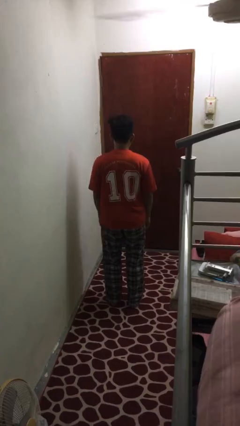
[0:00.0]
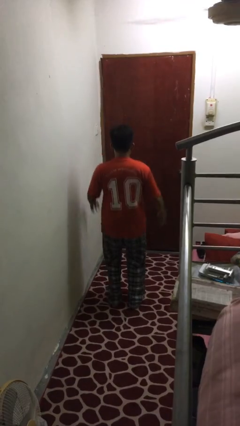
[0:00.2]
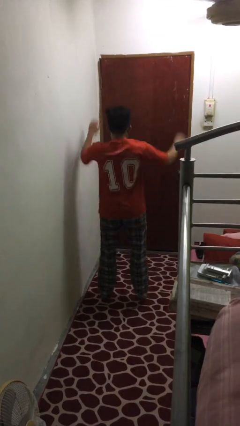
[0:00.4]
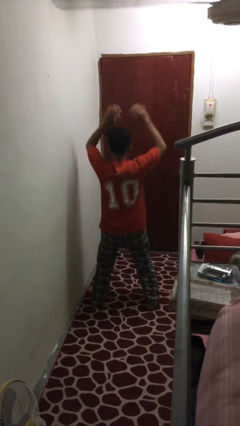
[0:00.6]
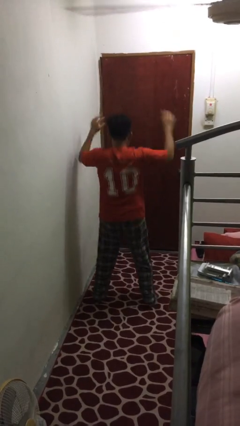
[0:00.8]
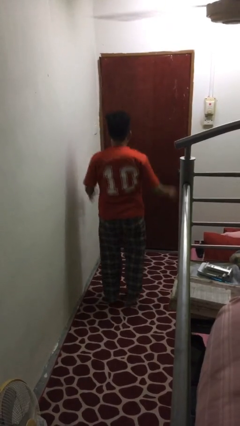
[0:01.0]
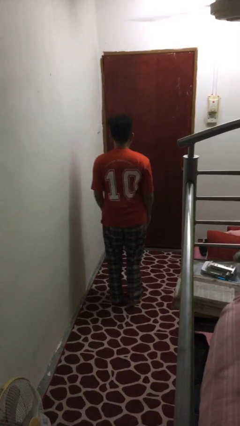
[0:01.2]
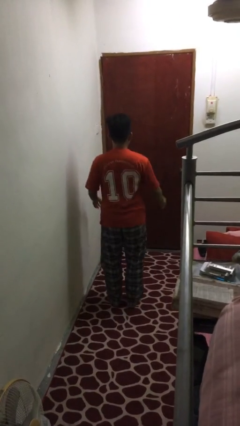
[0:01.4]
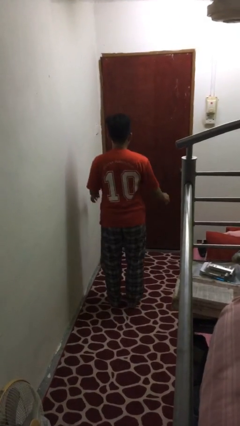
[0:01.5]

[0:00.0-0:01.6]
person exercises with jumping jacks

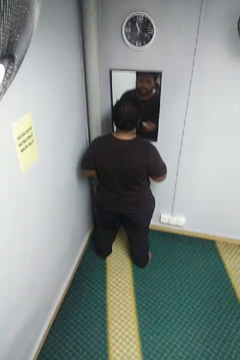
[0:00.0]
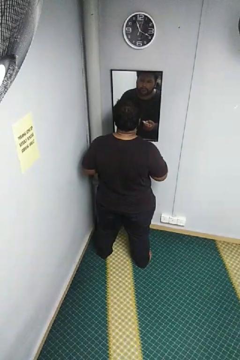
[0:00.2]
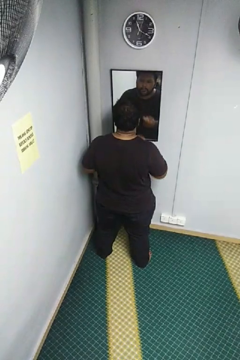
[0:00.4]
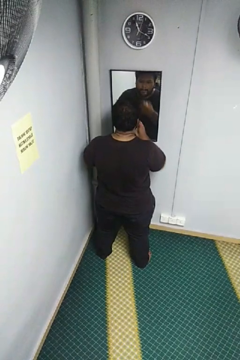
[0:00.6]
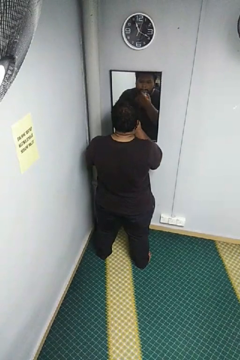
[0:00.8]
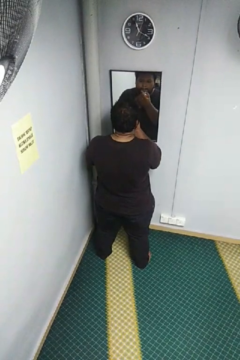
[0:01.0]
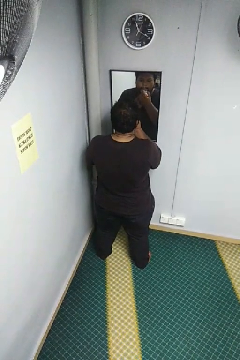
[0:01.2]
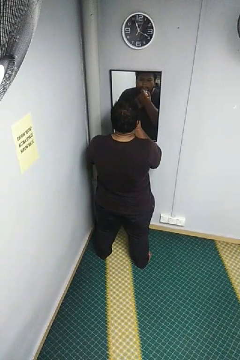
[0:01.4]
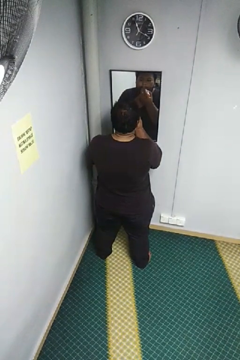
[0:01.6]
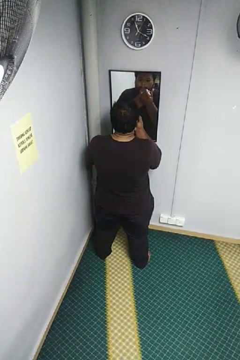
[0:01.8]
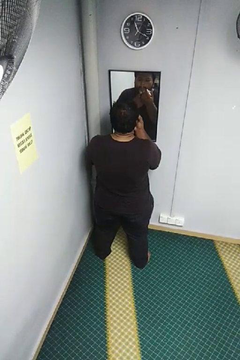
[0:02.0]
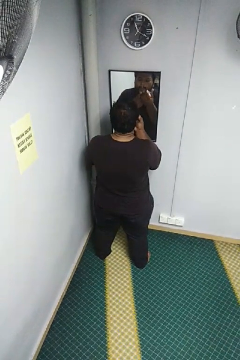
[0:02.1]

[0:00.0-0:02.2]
person applies lip makeup

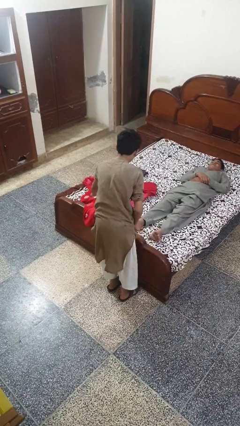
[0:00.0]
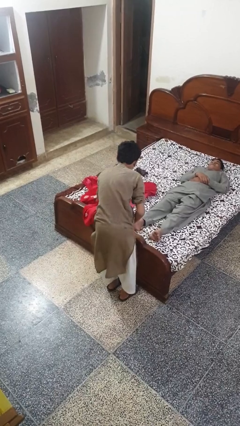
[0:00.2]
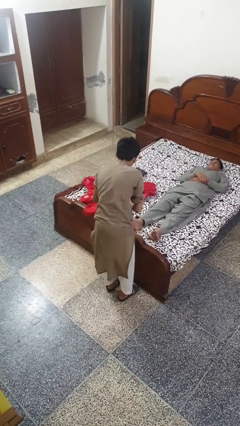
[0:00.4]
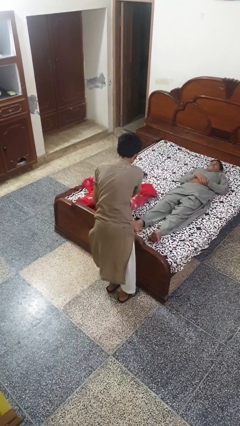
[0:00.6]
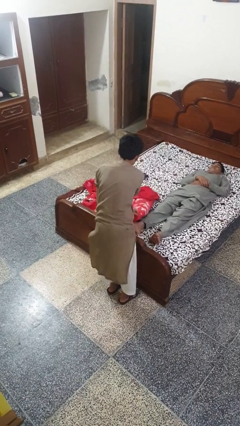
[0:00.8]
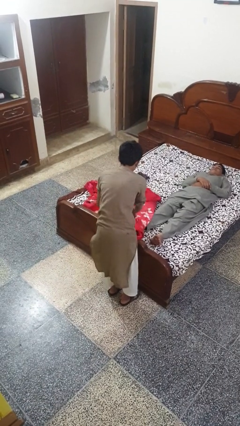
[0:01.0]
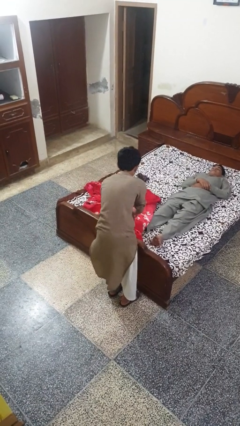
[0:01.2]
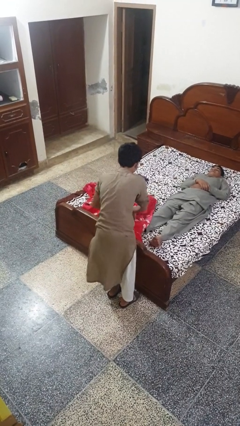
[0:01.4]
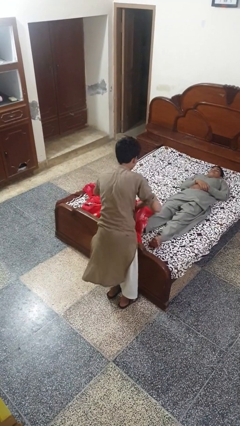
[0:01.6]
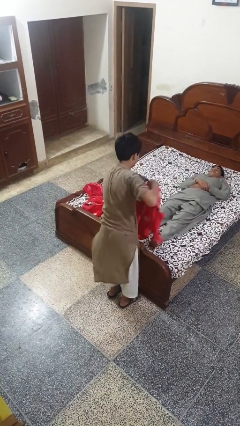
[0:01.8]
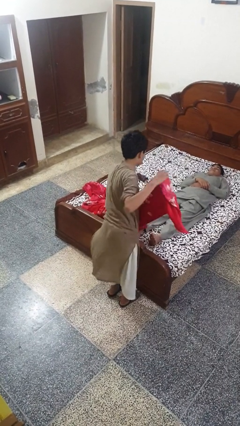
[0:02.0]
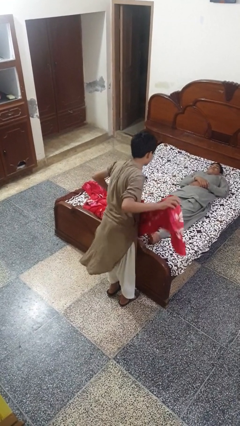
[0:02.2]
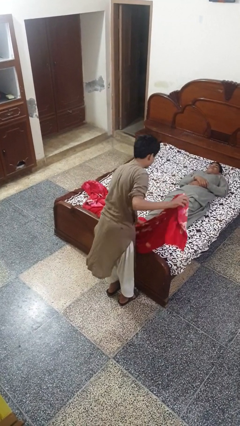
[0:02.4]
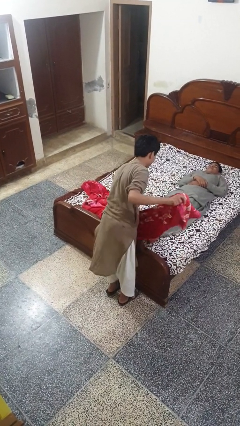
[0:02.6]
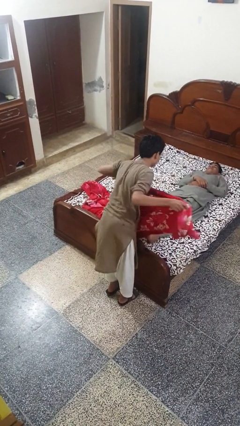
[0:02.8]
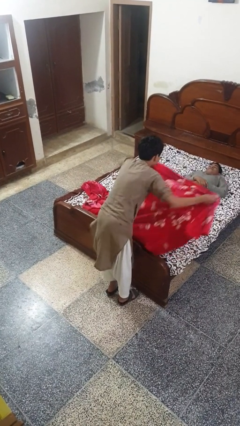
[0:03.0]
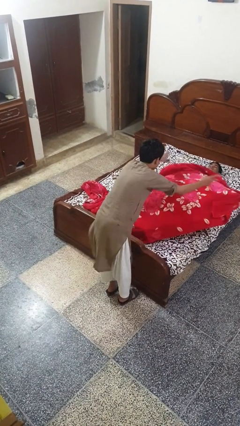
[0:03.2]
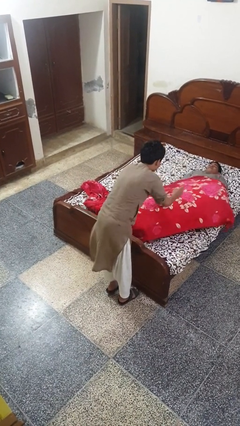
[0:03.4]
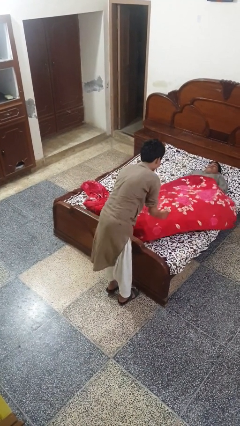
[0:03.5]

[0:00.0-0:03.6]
person covers friend with blanket

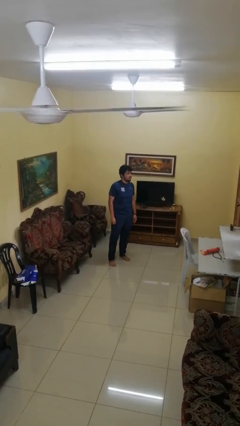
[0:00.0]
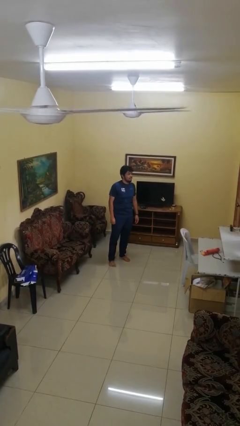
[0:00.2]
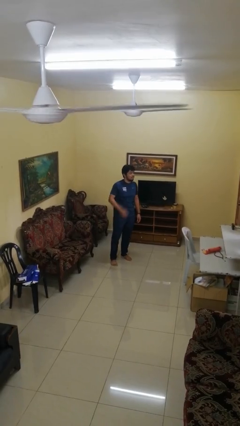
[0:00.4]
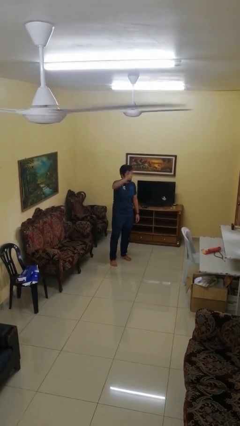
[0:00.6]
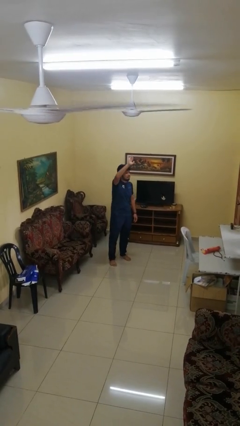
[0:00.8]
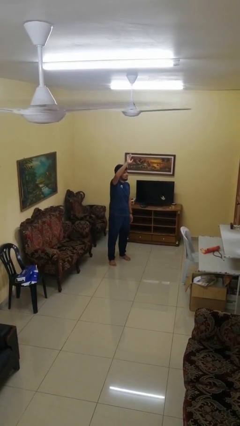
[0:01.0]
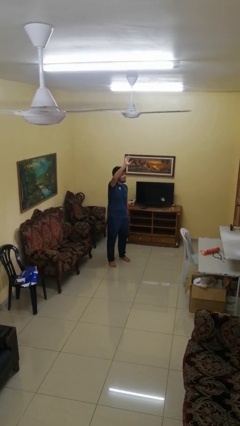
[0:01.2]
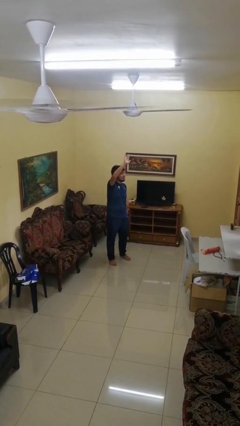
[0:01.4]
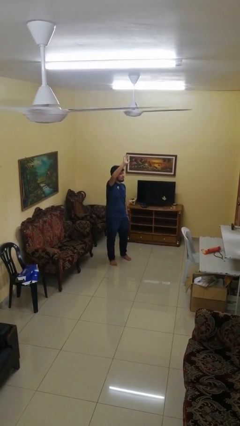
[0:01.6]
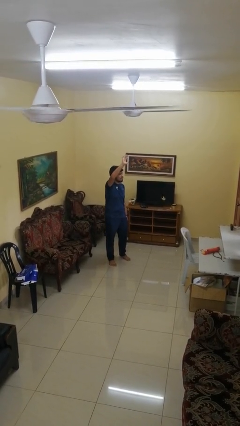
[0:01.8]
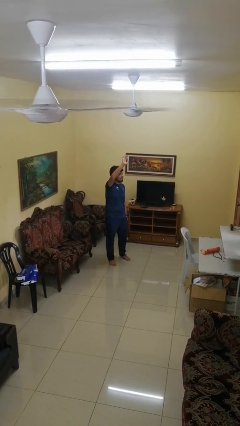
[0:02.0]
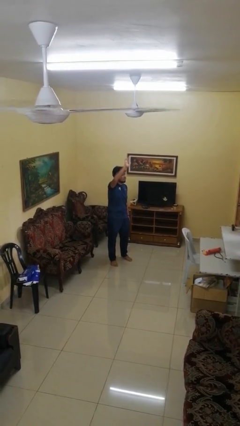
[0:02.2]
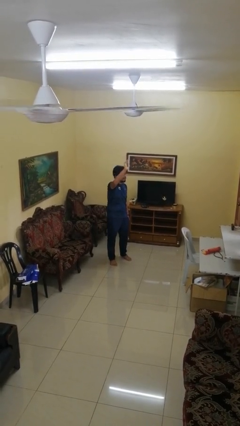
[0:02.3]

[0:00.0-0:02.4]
person gestures raise hand

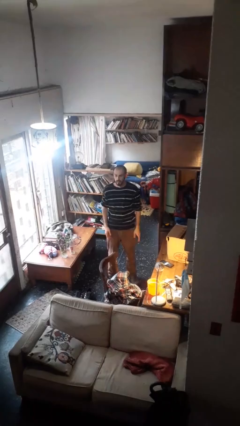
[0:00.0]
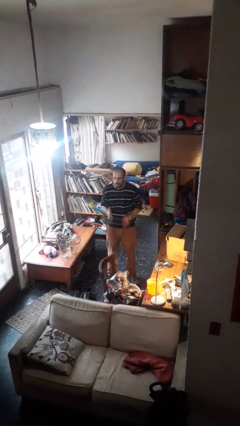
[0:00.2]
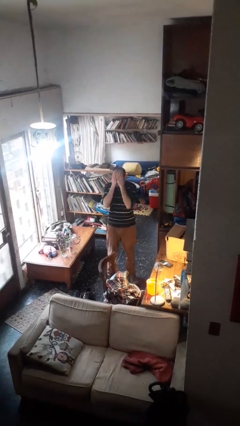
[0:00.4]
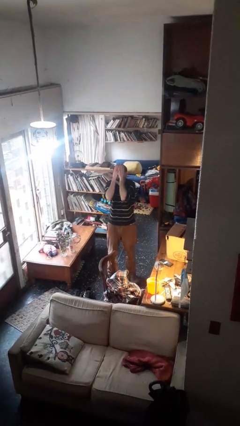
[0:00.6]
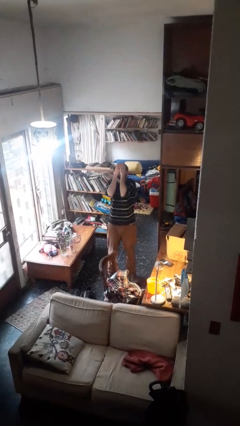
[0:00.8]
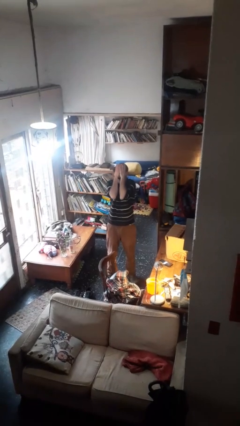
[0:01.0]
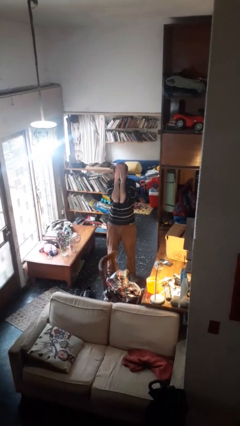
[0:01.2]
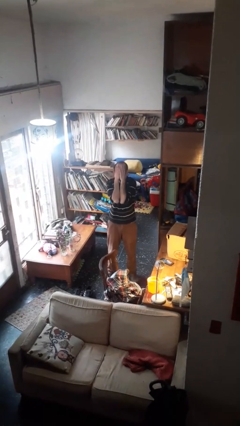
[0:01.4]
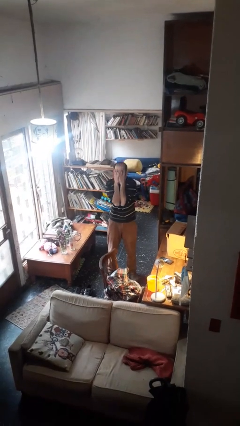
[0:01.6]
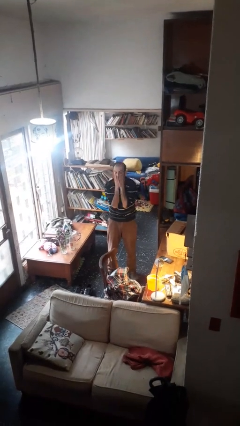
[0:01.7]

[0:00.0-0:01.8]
person covers face with hands

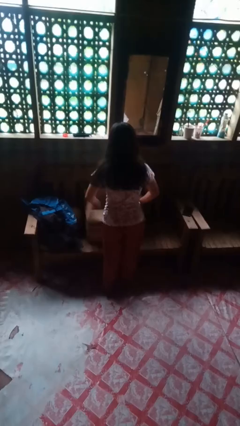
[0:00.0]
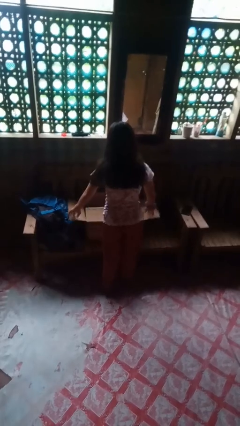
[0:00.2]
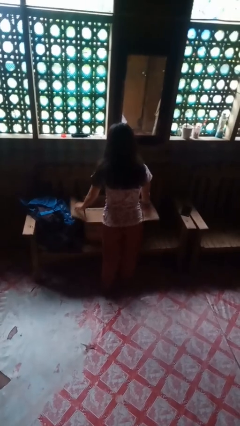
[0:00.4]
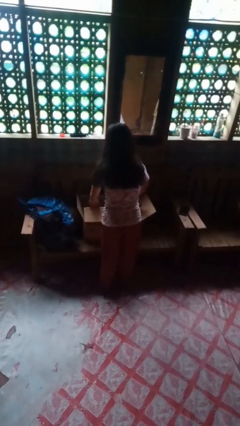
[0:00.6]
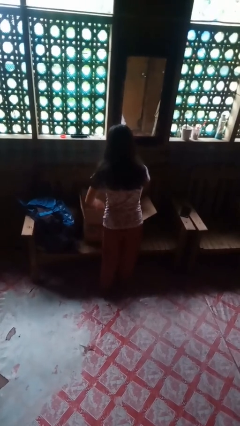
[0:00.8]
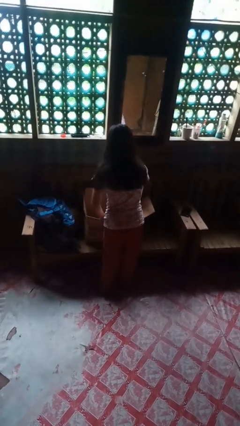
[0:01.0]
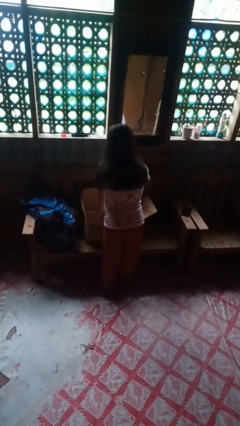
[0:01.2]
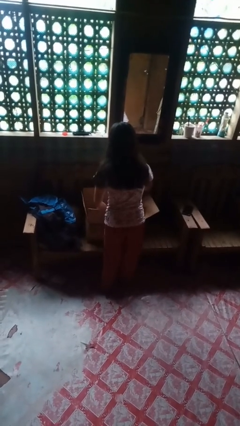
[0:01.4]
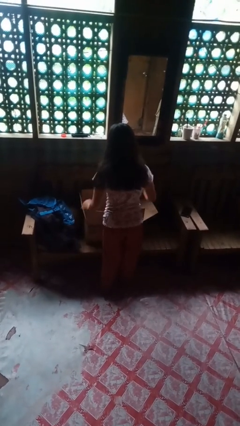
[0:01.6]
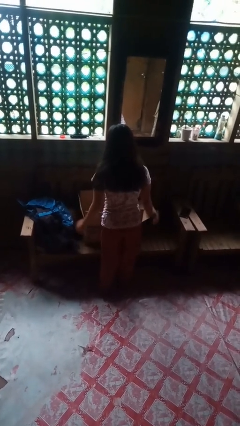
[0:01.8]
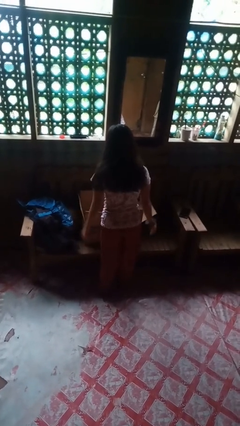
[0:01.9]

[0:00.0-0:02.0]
person opens box

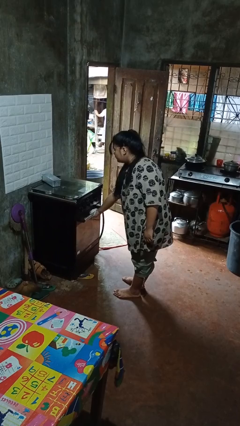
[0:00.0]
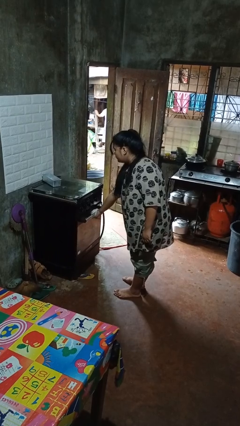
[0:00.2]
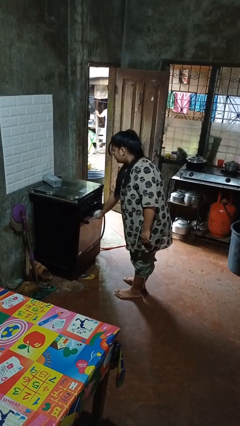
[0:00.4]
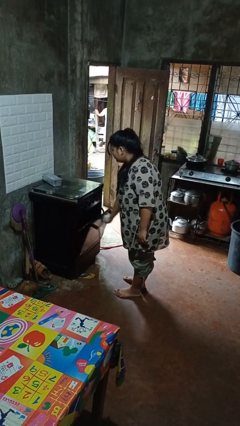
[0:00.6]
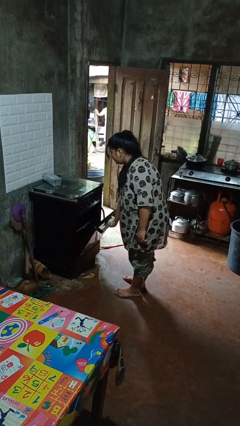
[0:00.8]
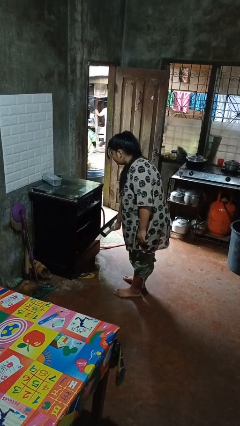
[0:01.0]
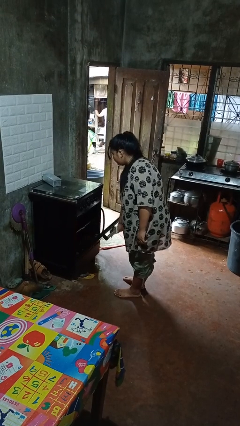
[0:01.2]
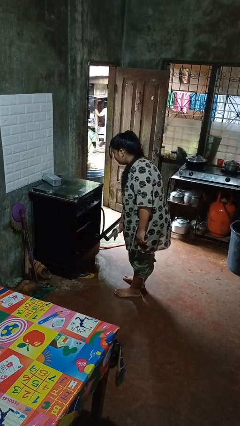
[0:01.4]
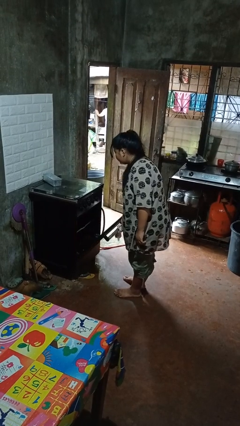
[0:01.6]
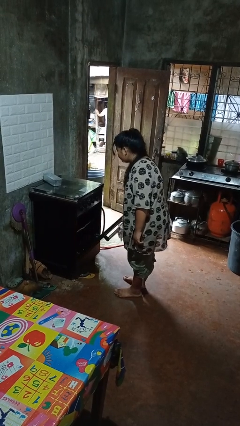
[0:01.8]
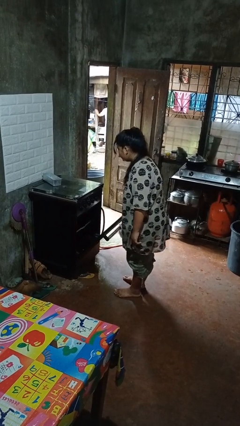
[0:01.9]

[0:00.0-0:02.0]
person opens oven door

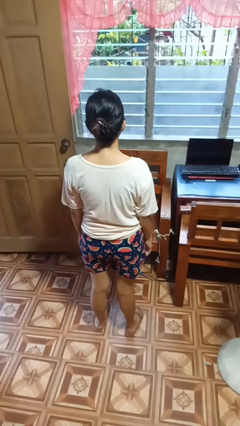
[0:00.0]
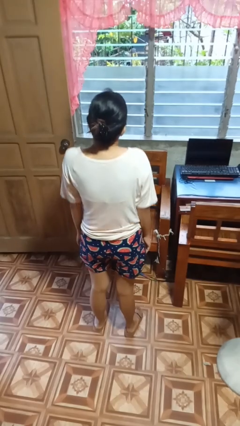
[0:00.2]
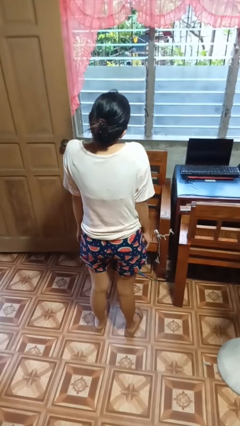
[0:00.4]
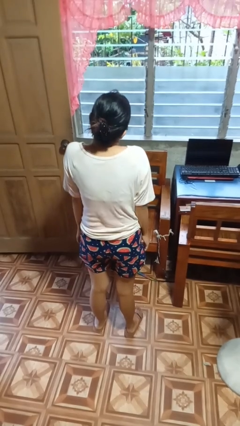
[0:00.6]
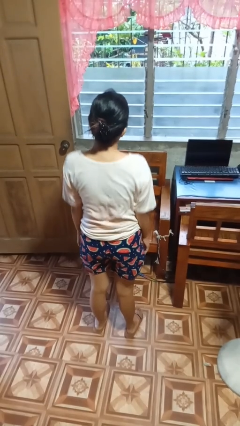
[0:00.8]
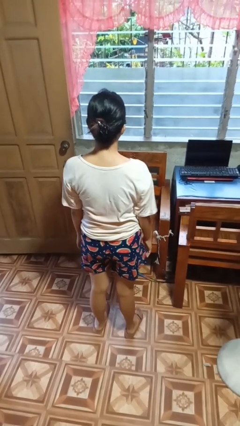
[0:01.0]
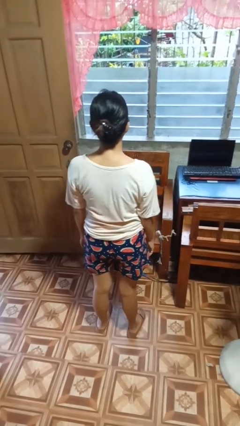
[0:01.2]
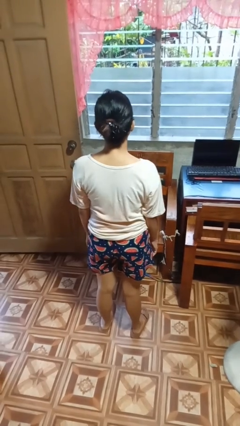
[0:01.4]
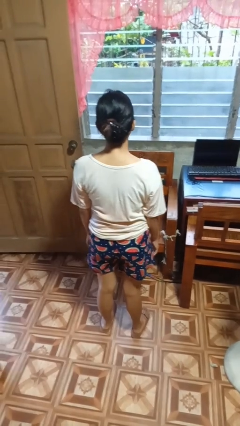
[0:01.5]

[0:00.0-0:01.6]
person shrugs
